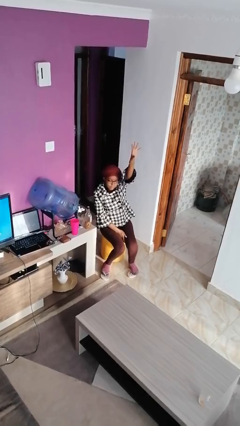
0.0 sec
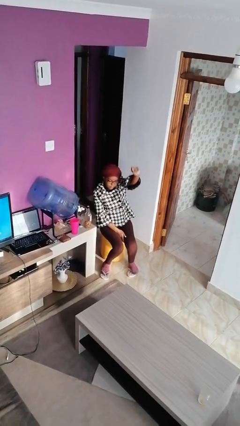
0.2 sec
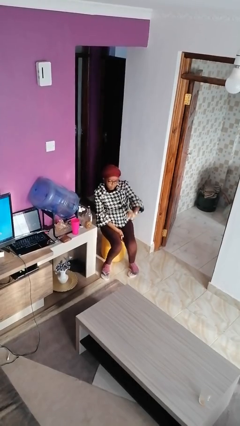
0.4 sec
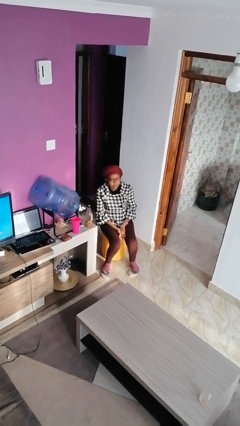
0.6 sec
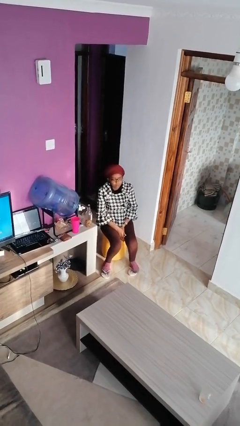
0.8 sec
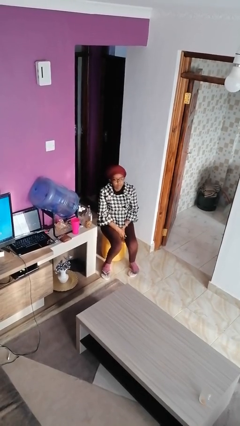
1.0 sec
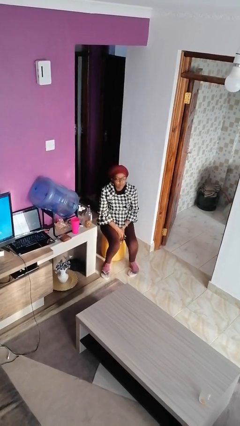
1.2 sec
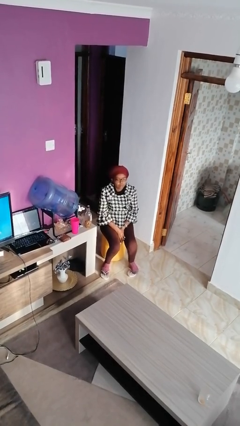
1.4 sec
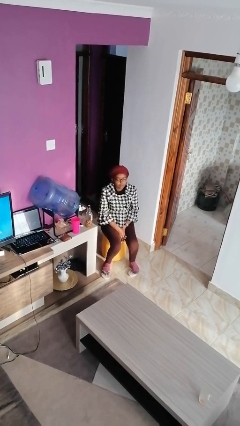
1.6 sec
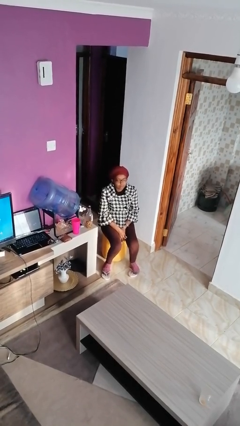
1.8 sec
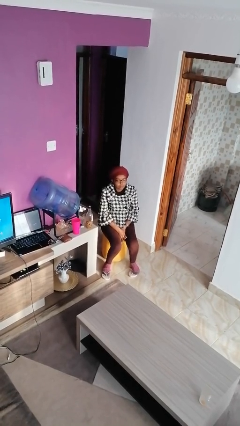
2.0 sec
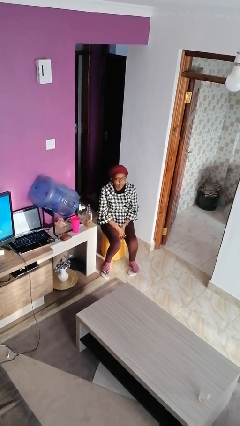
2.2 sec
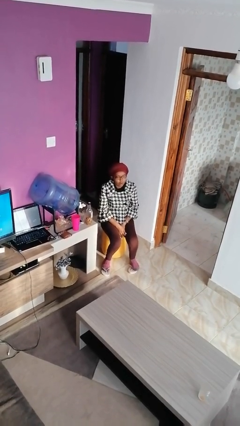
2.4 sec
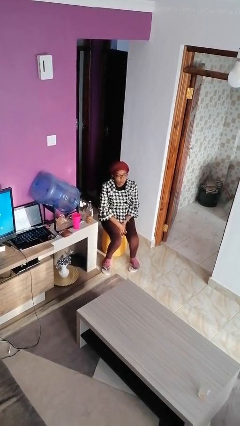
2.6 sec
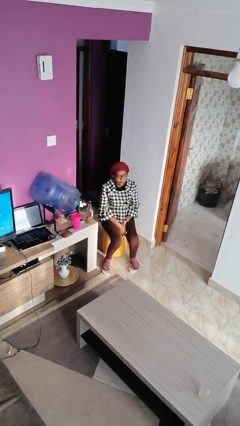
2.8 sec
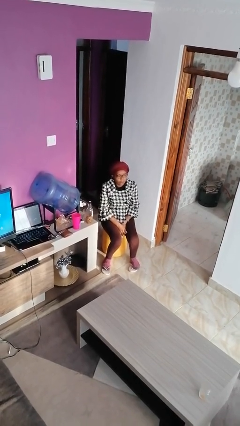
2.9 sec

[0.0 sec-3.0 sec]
person gestures lower hand

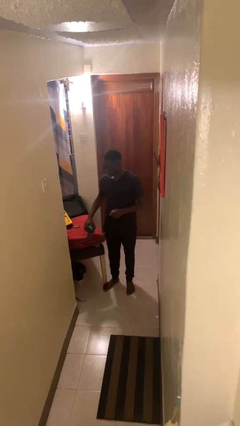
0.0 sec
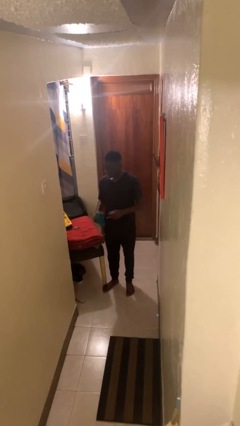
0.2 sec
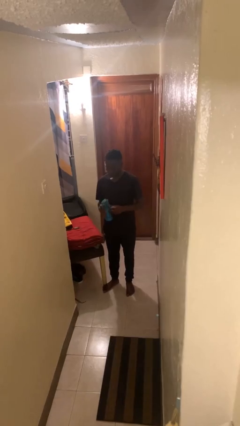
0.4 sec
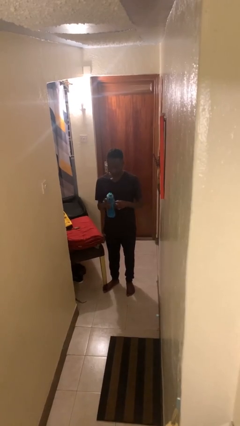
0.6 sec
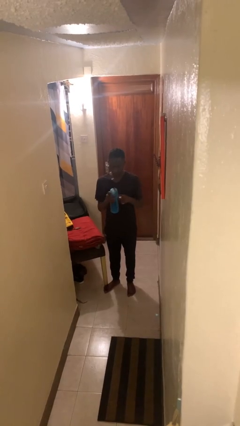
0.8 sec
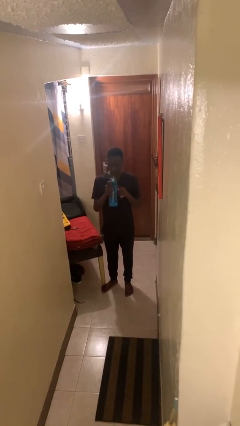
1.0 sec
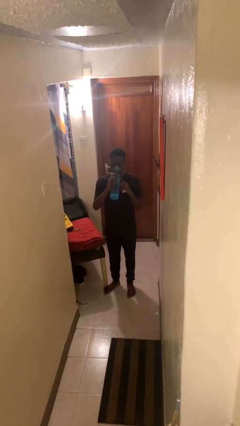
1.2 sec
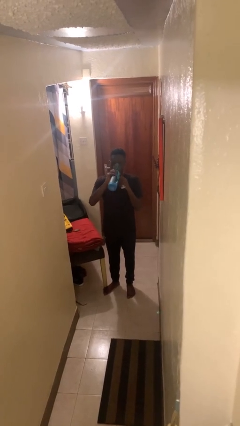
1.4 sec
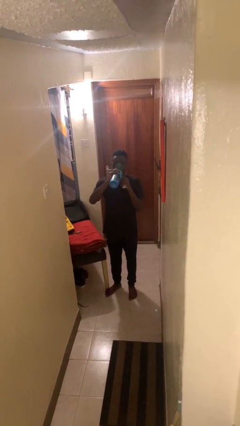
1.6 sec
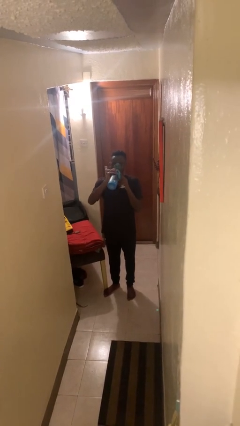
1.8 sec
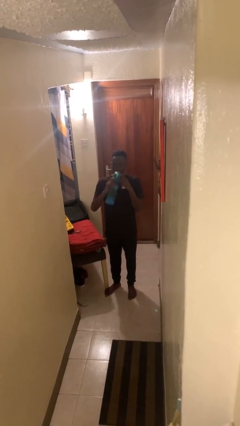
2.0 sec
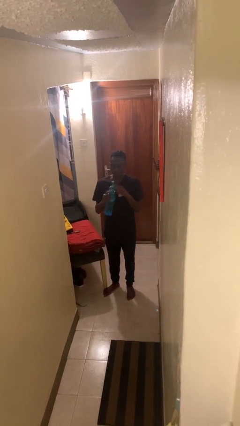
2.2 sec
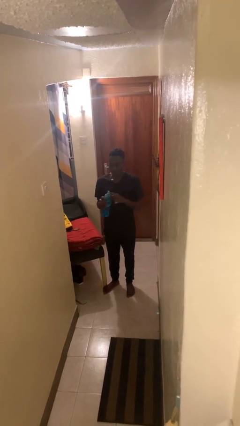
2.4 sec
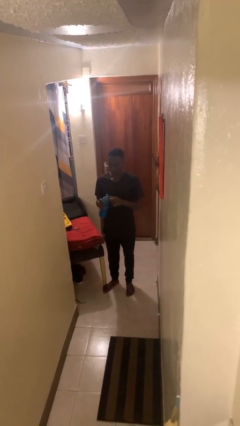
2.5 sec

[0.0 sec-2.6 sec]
person drinks from cup

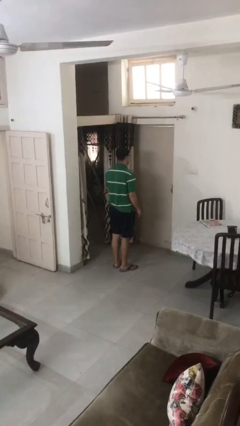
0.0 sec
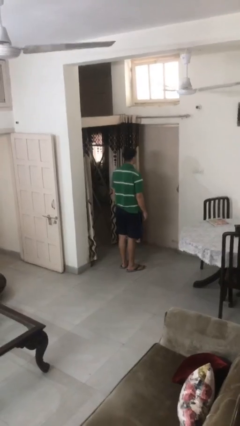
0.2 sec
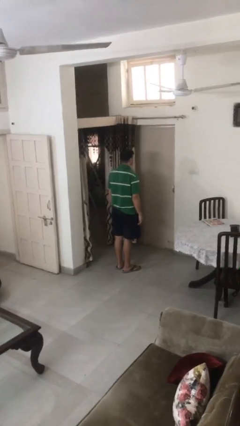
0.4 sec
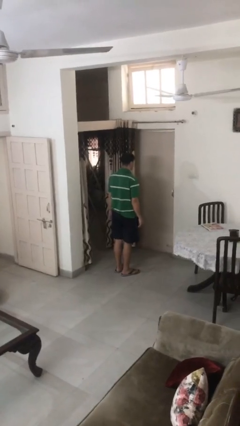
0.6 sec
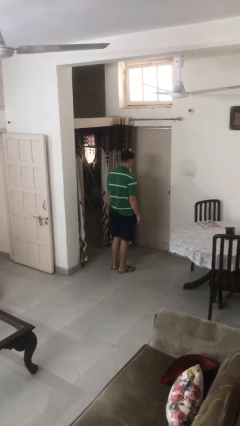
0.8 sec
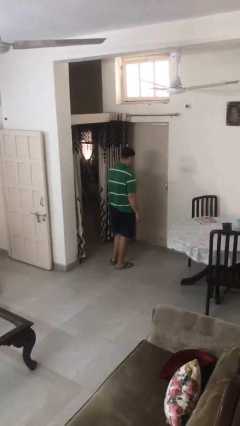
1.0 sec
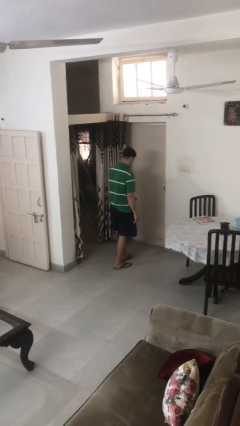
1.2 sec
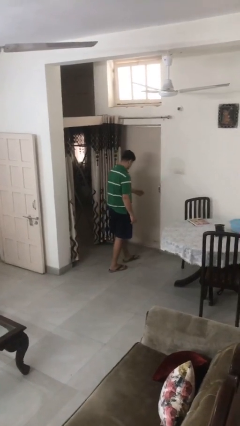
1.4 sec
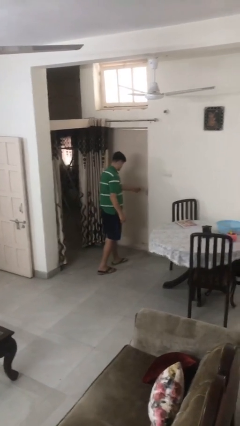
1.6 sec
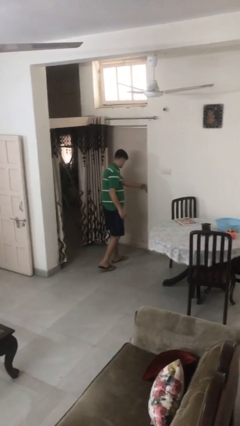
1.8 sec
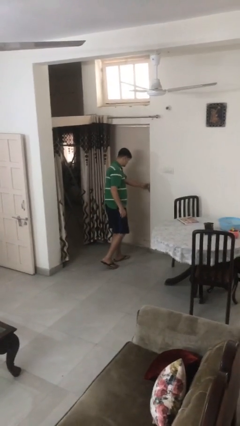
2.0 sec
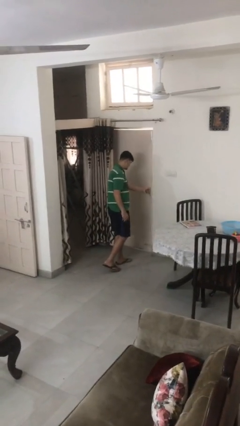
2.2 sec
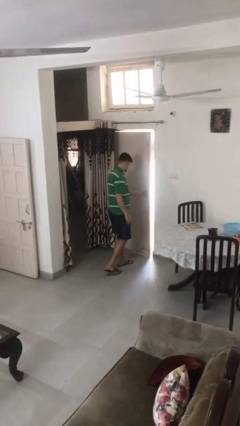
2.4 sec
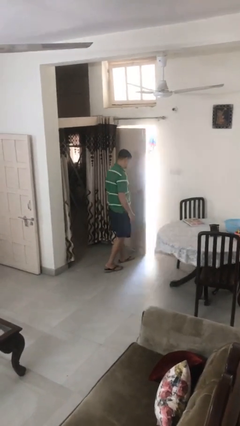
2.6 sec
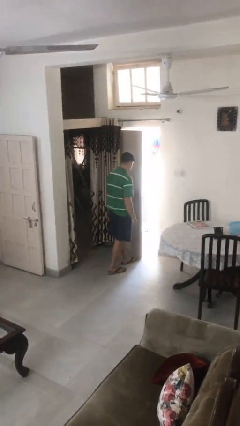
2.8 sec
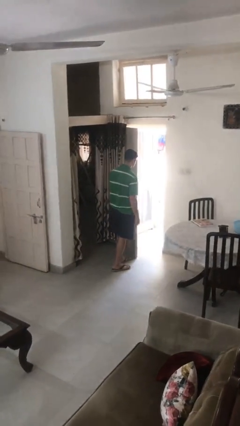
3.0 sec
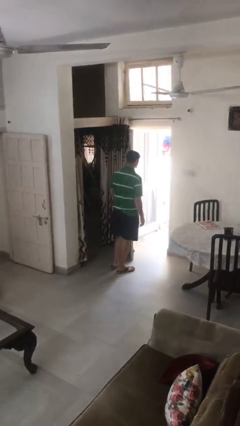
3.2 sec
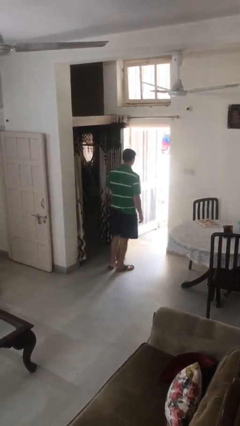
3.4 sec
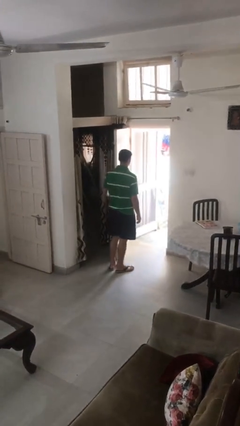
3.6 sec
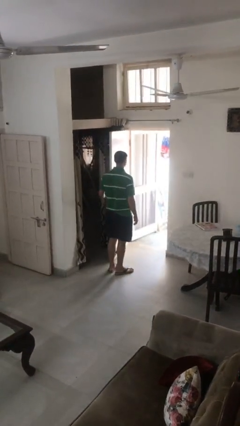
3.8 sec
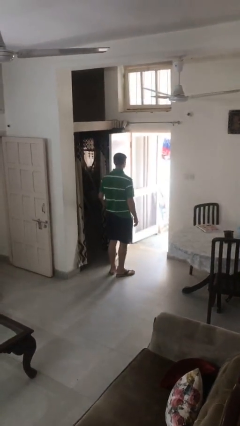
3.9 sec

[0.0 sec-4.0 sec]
person opens facility door

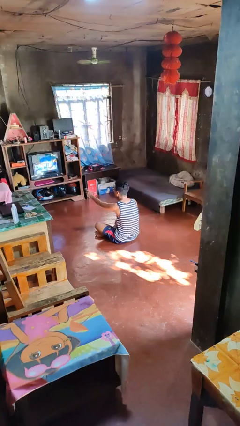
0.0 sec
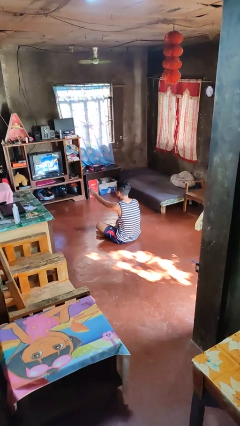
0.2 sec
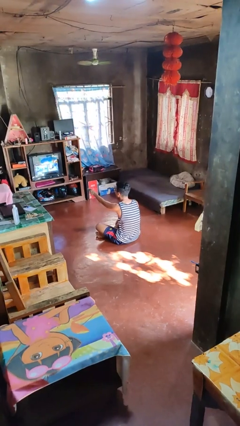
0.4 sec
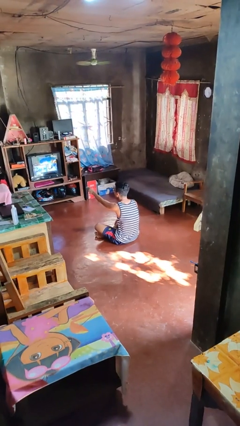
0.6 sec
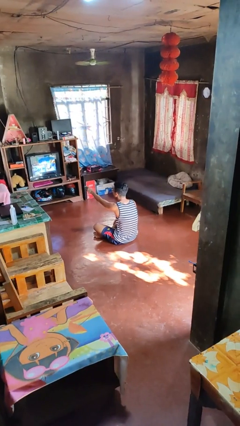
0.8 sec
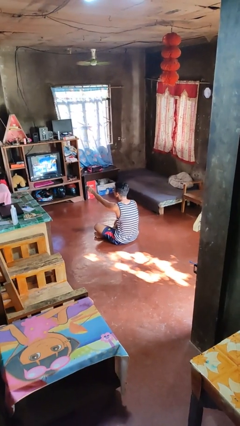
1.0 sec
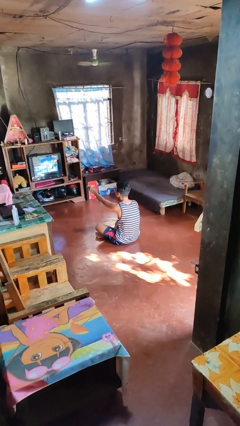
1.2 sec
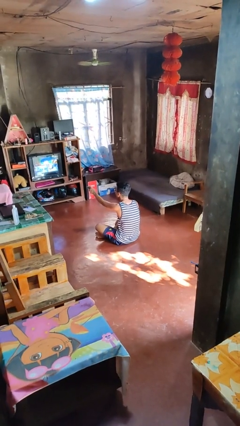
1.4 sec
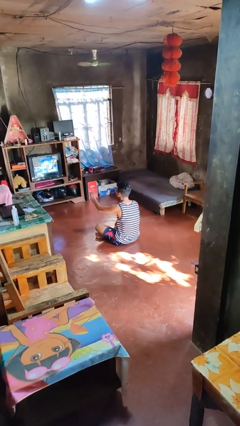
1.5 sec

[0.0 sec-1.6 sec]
person uses television remote

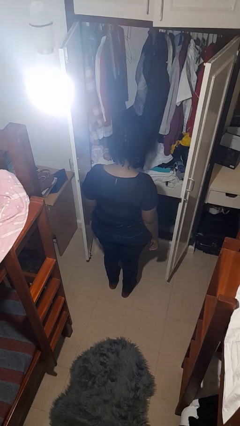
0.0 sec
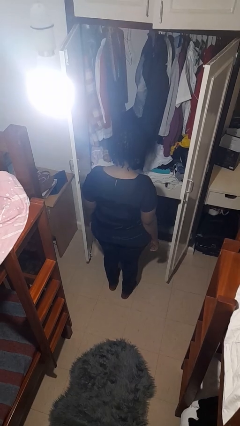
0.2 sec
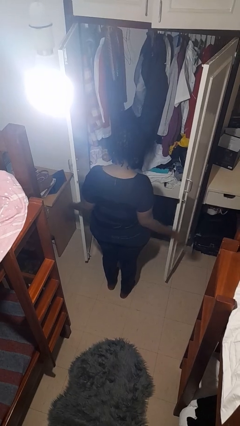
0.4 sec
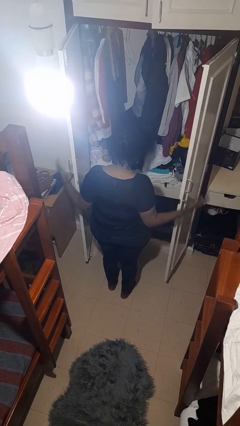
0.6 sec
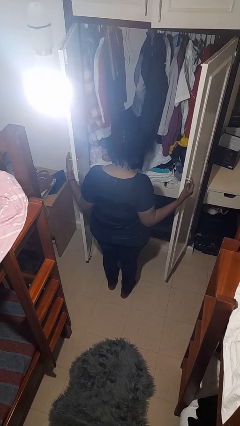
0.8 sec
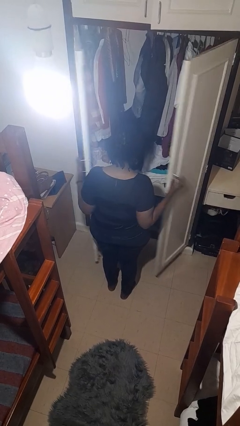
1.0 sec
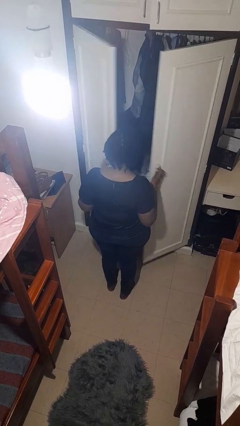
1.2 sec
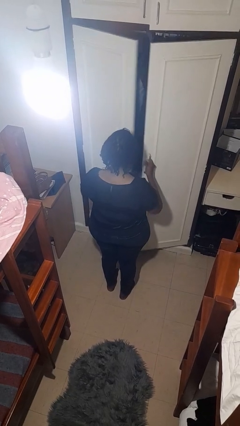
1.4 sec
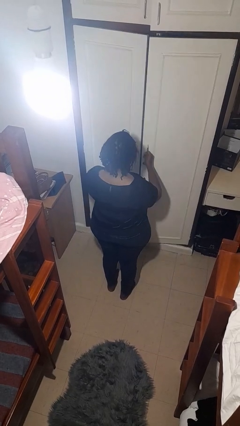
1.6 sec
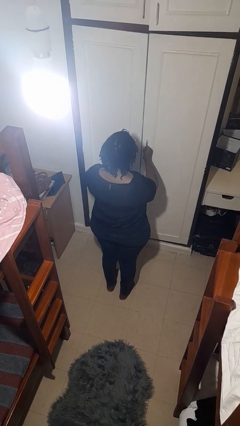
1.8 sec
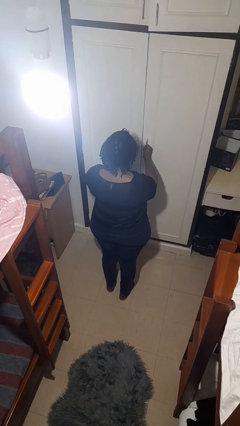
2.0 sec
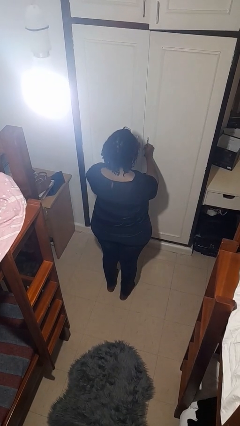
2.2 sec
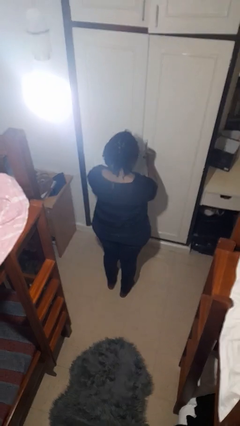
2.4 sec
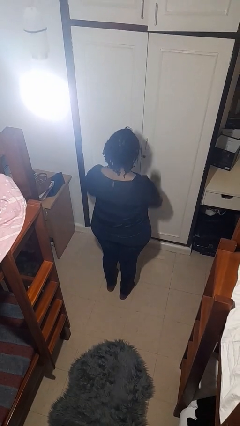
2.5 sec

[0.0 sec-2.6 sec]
person closes closet door

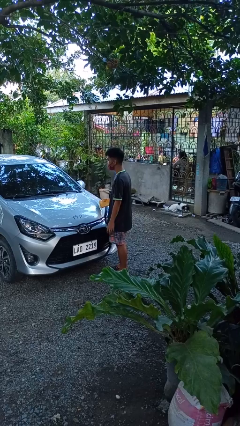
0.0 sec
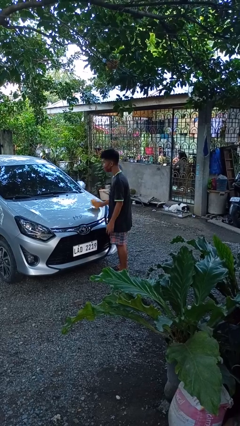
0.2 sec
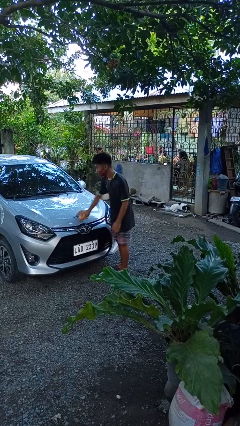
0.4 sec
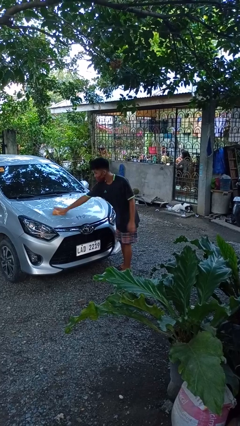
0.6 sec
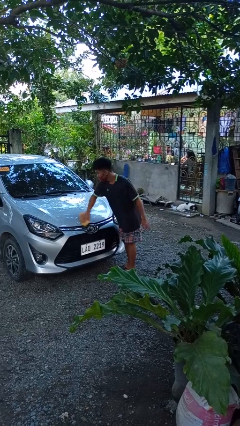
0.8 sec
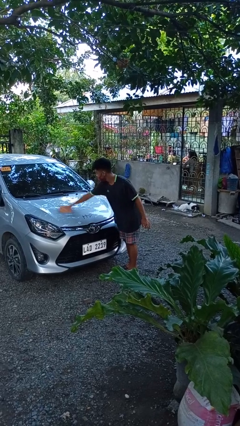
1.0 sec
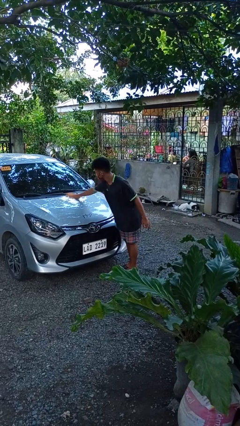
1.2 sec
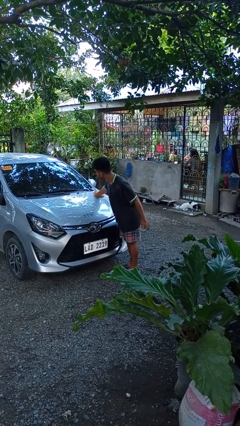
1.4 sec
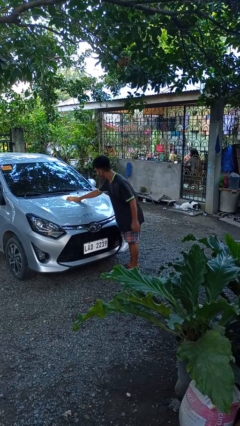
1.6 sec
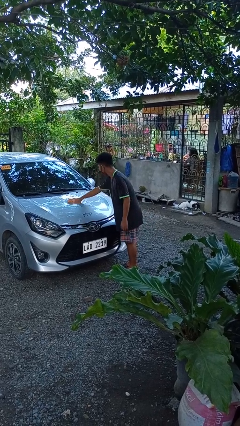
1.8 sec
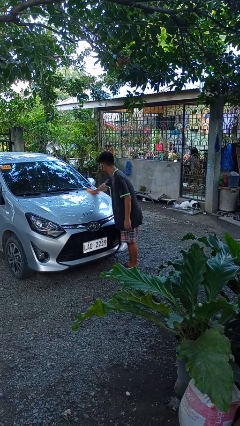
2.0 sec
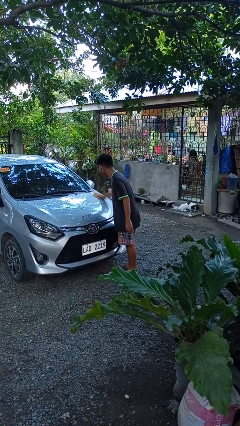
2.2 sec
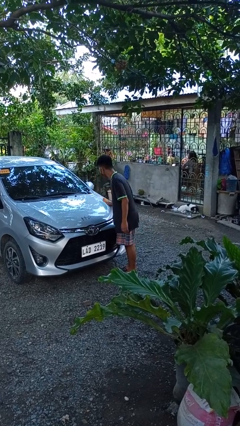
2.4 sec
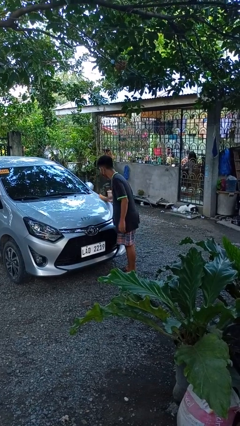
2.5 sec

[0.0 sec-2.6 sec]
person polishes car with rag

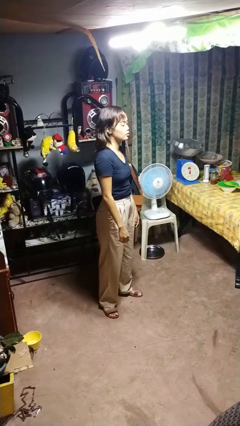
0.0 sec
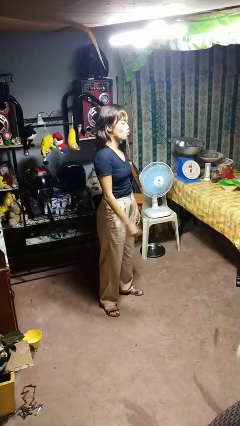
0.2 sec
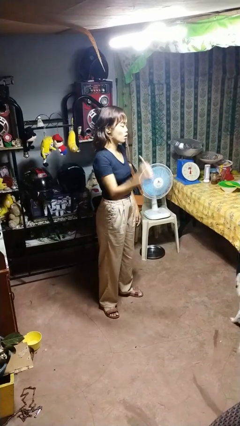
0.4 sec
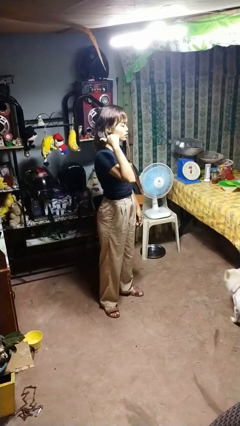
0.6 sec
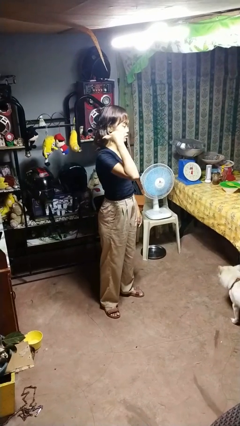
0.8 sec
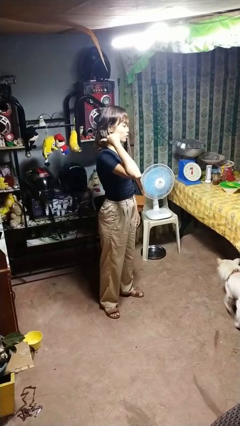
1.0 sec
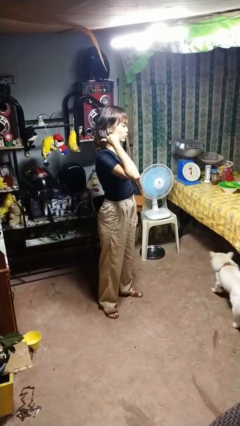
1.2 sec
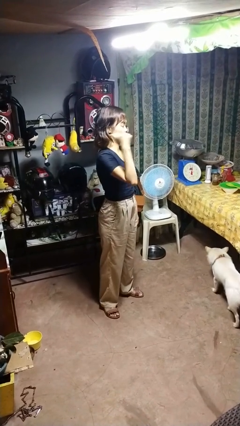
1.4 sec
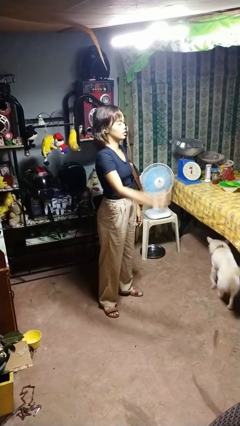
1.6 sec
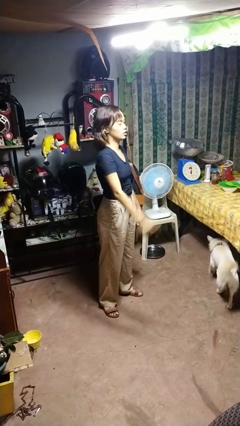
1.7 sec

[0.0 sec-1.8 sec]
person gestures behind me
